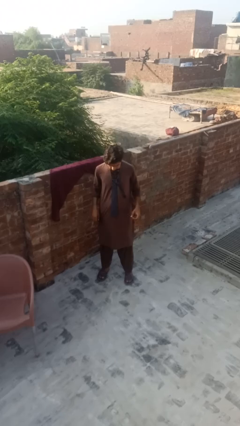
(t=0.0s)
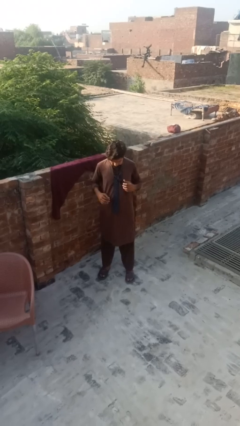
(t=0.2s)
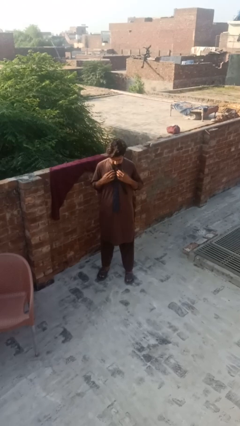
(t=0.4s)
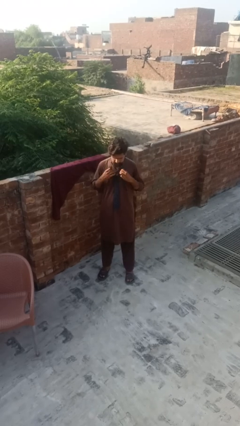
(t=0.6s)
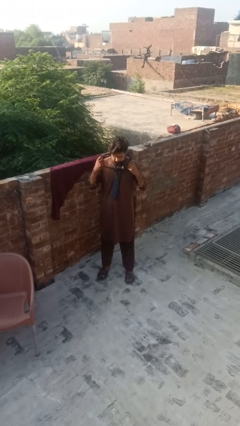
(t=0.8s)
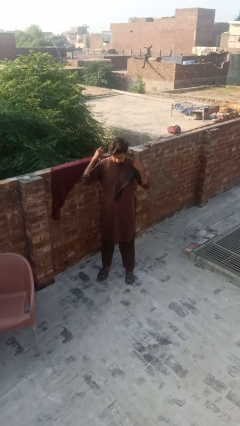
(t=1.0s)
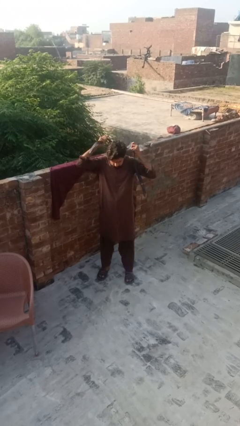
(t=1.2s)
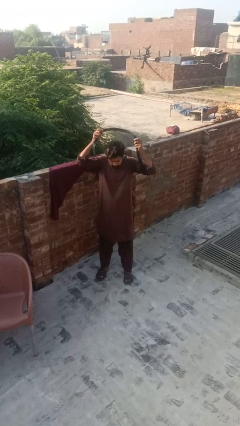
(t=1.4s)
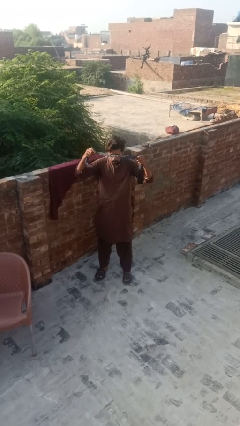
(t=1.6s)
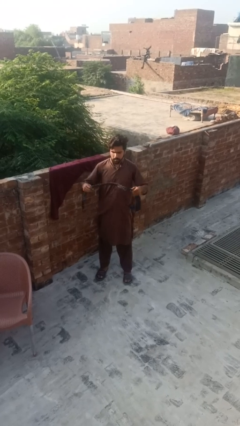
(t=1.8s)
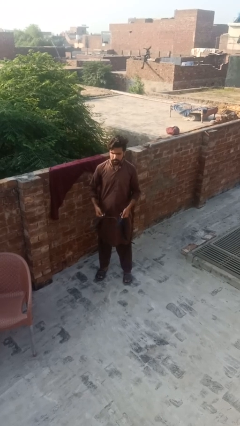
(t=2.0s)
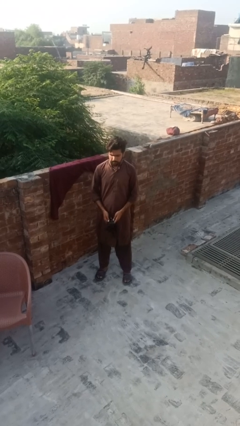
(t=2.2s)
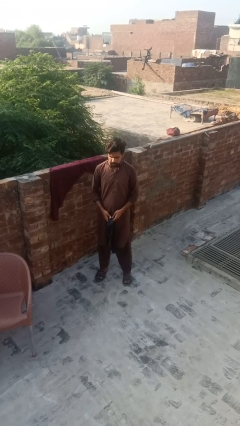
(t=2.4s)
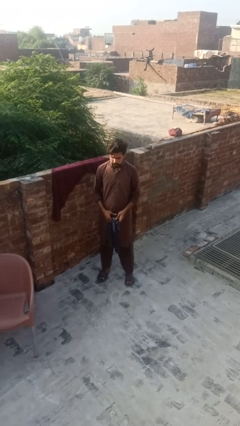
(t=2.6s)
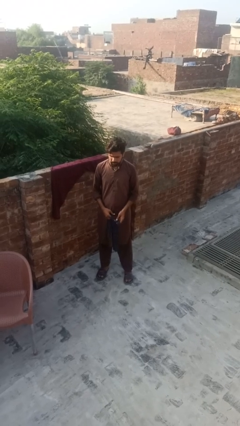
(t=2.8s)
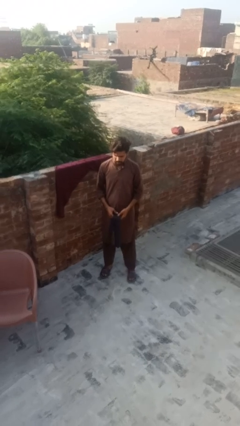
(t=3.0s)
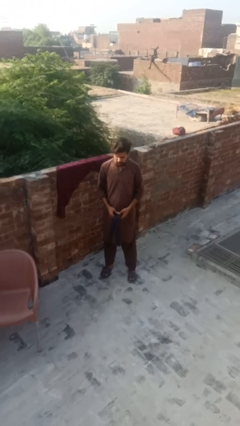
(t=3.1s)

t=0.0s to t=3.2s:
person takes off necktie

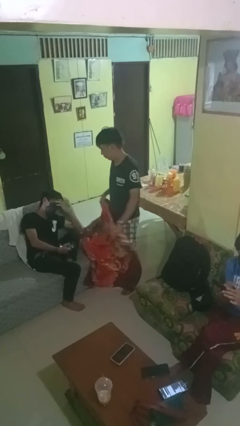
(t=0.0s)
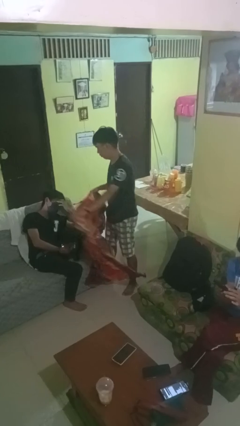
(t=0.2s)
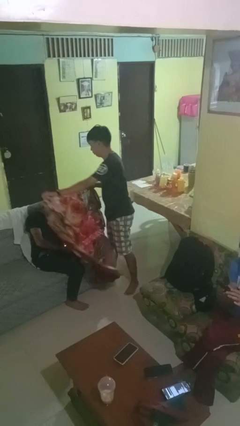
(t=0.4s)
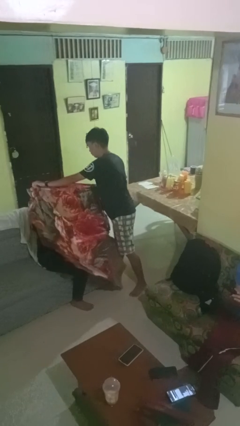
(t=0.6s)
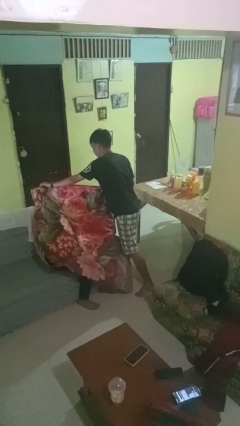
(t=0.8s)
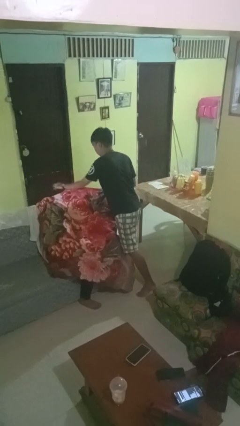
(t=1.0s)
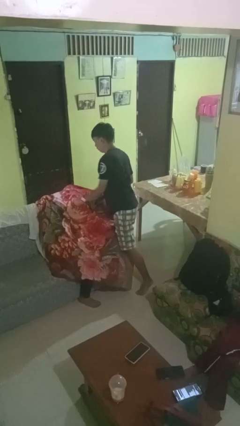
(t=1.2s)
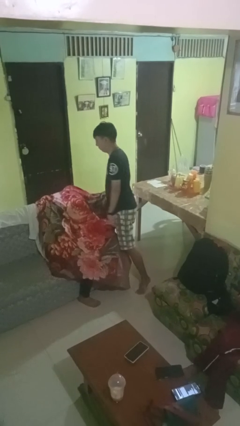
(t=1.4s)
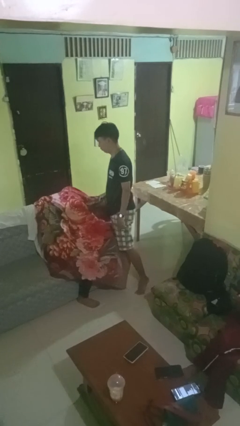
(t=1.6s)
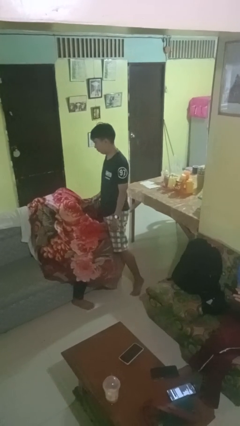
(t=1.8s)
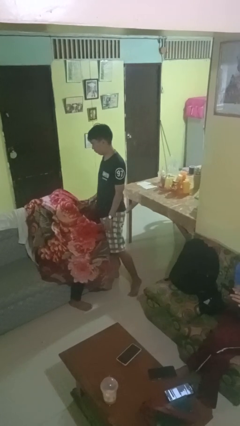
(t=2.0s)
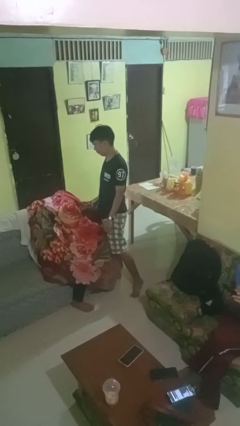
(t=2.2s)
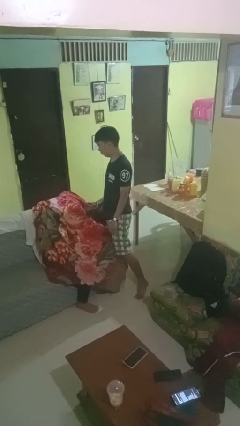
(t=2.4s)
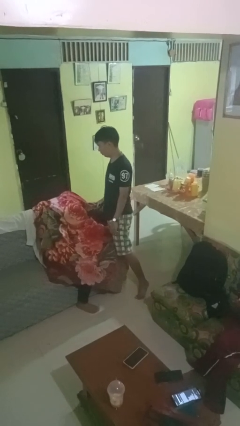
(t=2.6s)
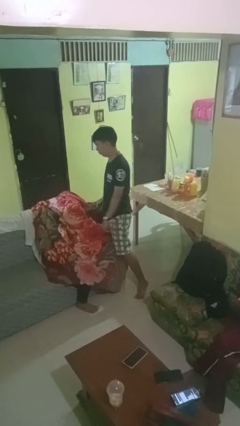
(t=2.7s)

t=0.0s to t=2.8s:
person covers friend with blanket

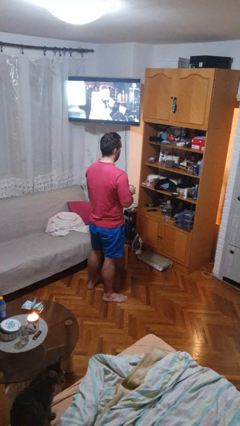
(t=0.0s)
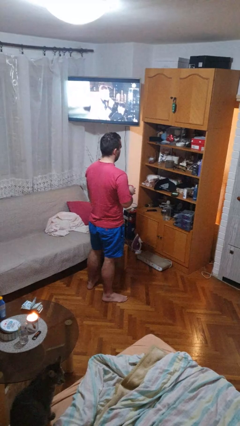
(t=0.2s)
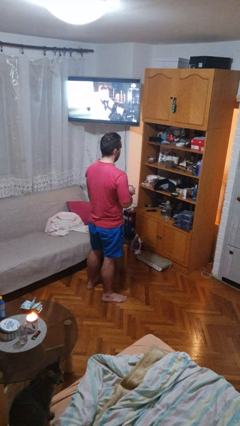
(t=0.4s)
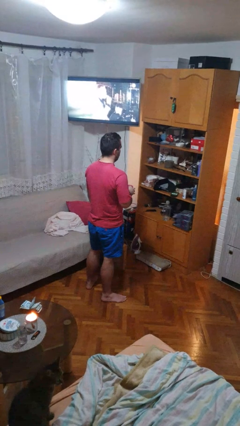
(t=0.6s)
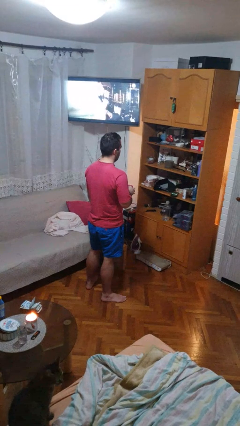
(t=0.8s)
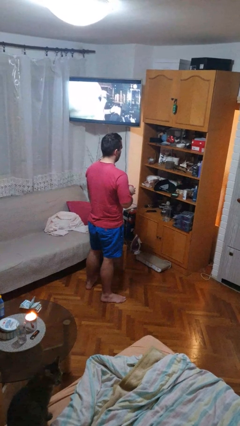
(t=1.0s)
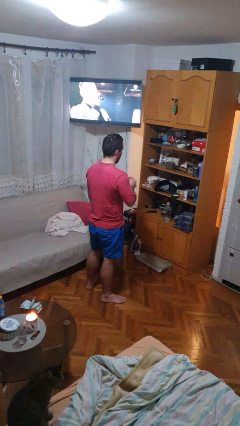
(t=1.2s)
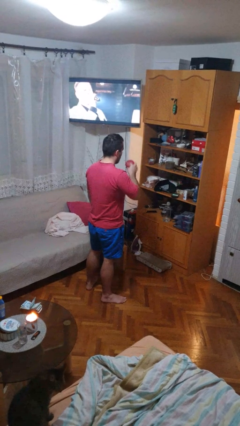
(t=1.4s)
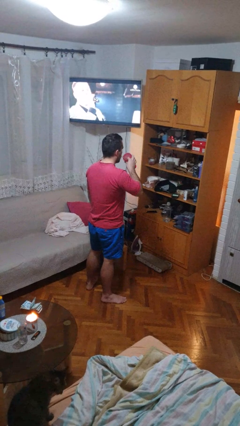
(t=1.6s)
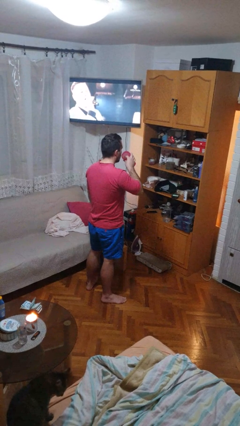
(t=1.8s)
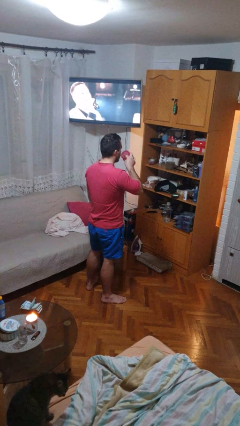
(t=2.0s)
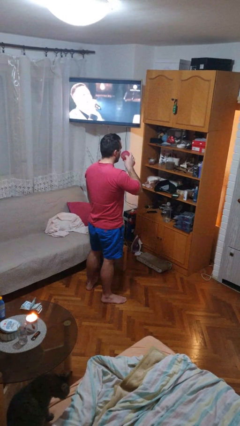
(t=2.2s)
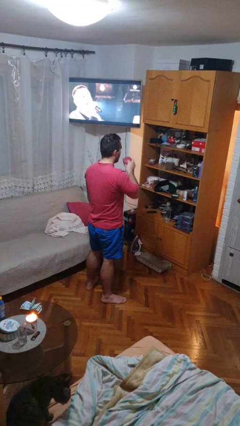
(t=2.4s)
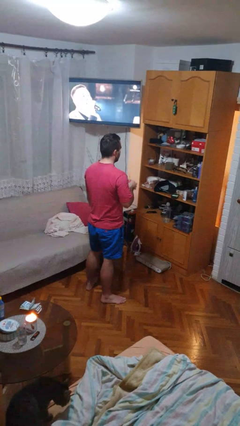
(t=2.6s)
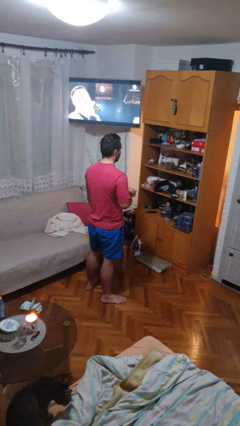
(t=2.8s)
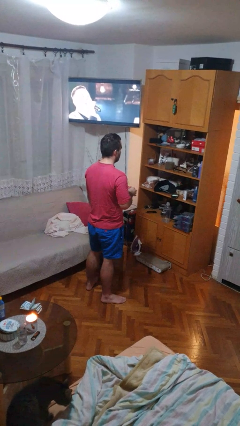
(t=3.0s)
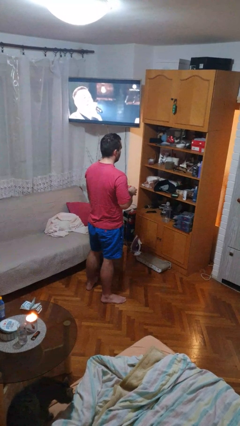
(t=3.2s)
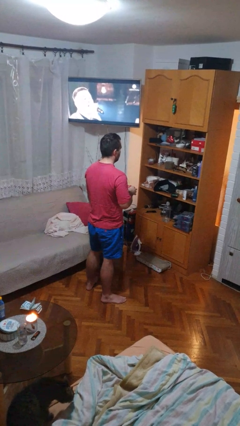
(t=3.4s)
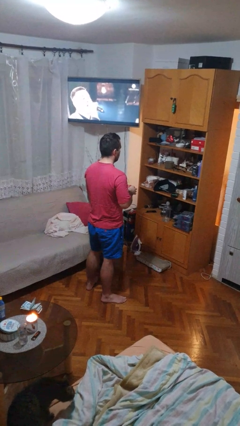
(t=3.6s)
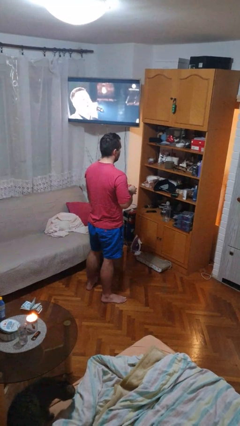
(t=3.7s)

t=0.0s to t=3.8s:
person drinks from straw

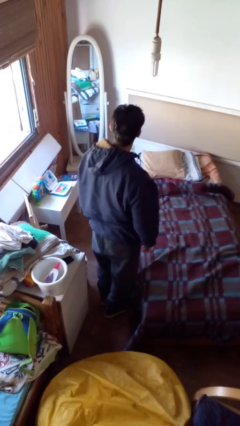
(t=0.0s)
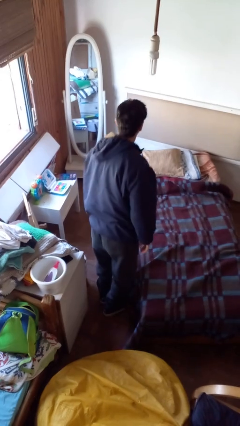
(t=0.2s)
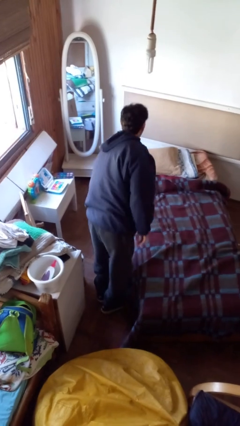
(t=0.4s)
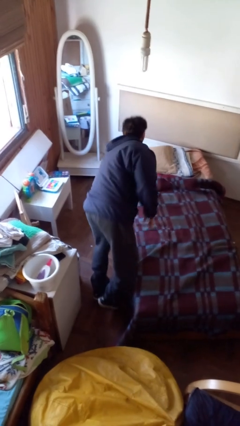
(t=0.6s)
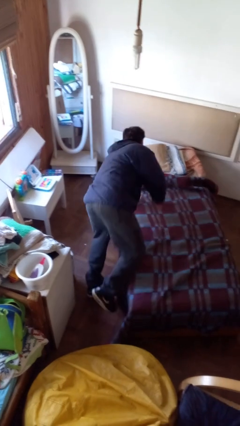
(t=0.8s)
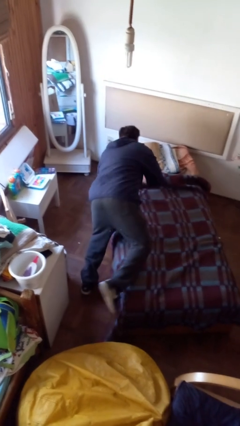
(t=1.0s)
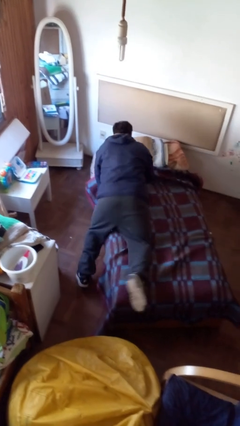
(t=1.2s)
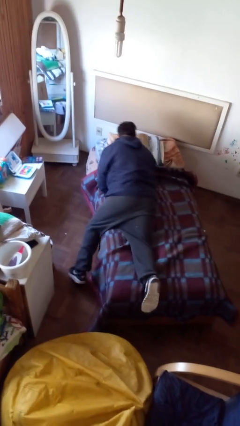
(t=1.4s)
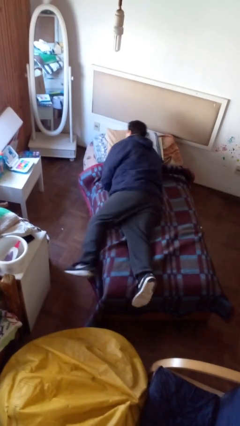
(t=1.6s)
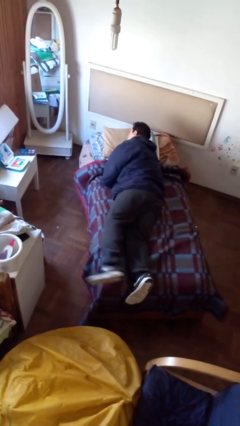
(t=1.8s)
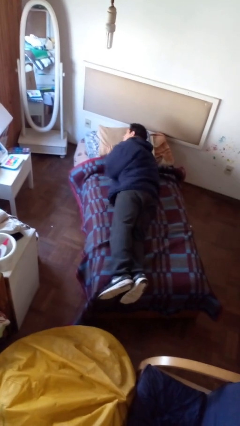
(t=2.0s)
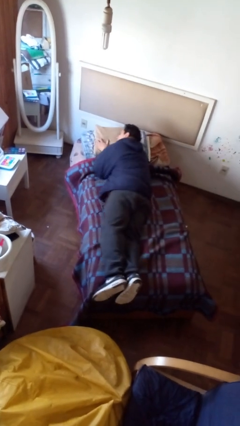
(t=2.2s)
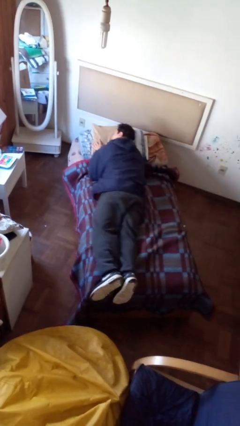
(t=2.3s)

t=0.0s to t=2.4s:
person lies down on bed

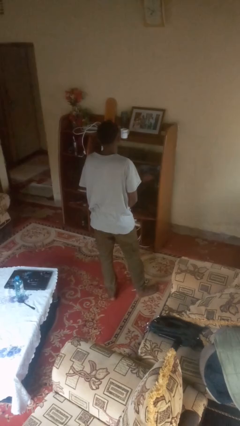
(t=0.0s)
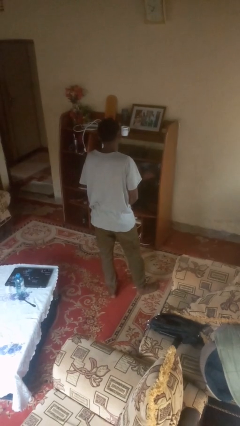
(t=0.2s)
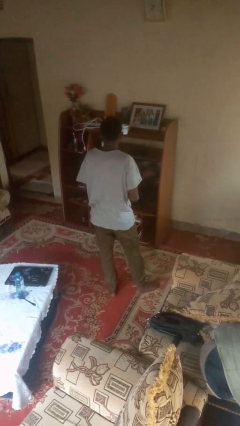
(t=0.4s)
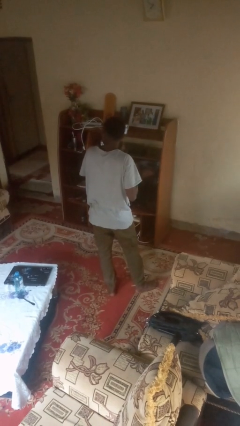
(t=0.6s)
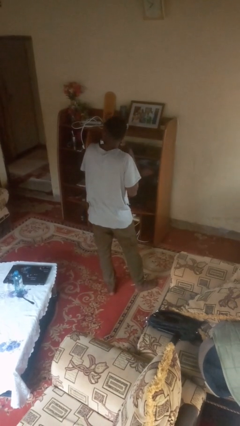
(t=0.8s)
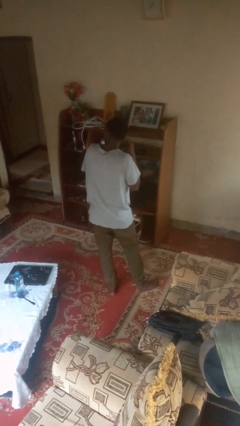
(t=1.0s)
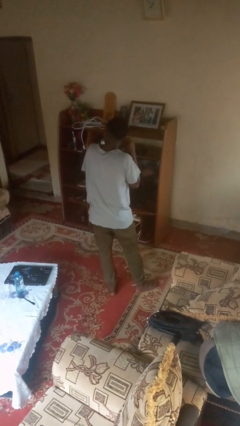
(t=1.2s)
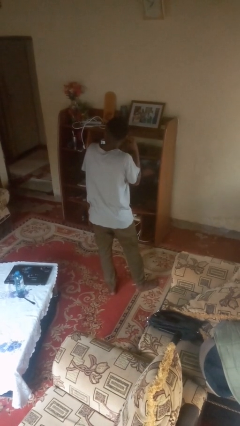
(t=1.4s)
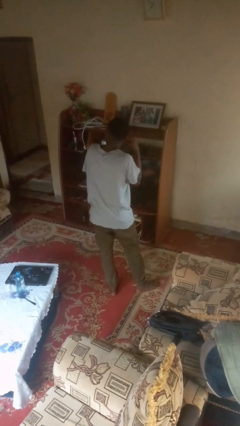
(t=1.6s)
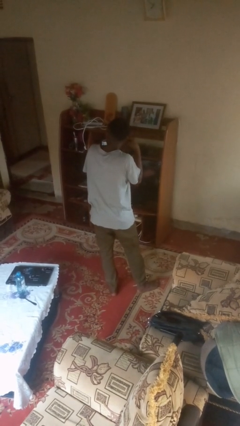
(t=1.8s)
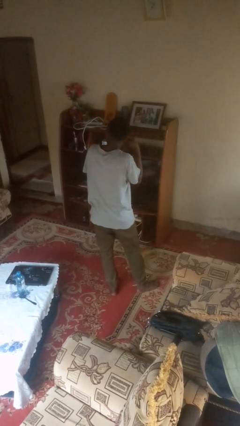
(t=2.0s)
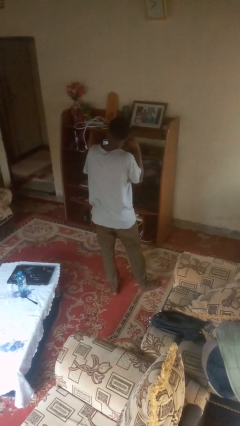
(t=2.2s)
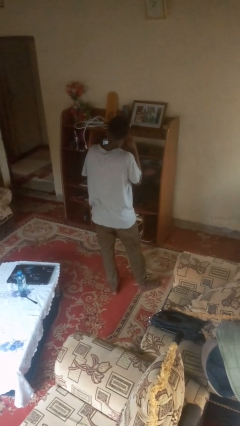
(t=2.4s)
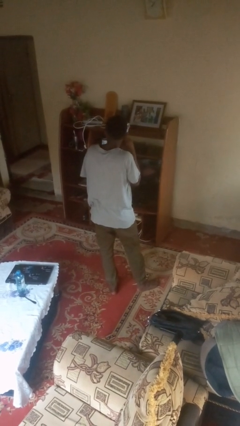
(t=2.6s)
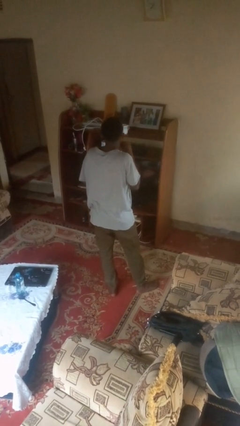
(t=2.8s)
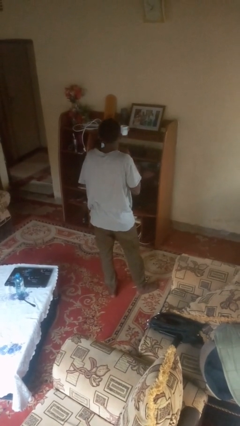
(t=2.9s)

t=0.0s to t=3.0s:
person takes off earrings

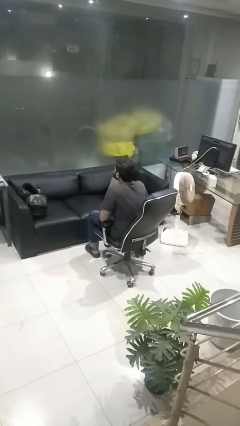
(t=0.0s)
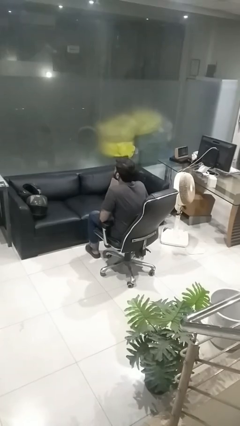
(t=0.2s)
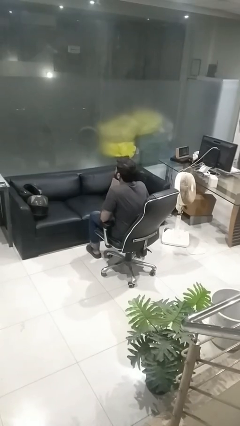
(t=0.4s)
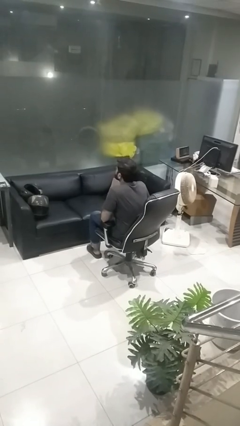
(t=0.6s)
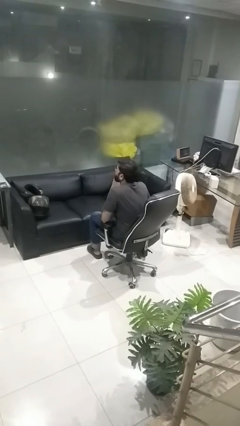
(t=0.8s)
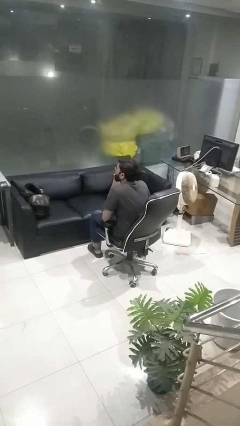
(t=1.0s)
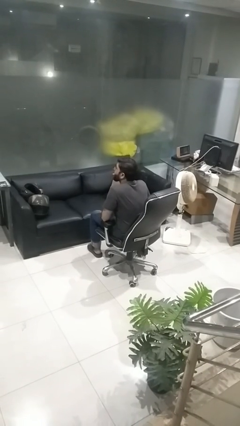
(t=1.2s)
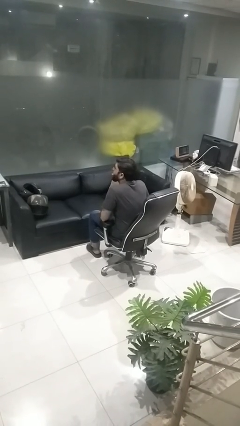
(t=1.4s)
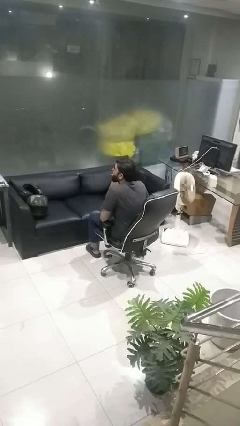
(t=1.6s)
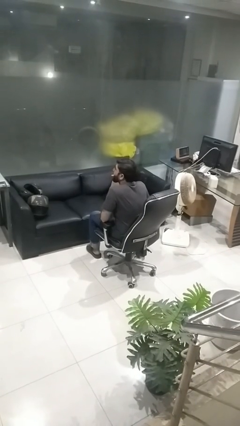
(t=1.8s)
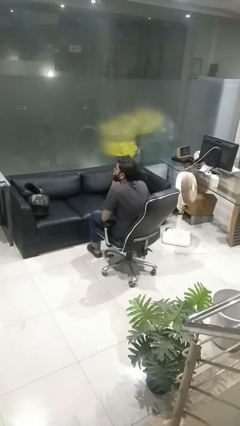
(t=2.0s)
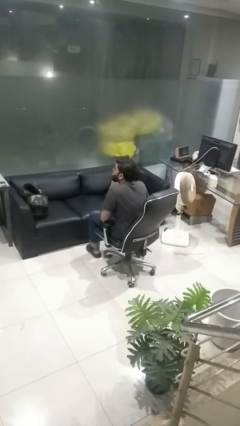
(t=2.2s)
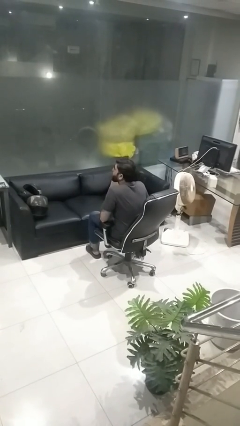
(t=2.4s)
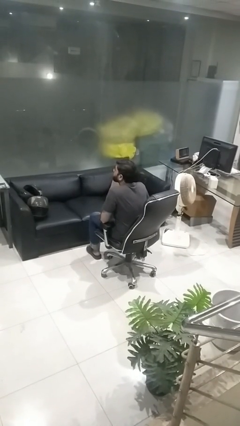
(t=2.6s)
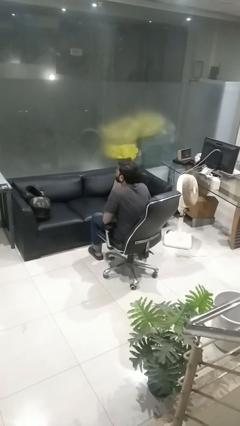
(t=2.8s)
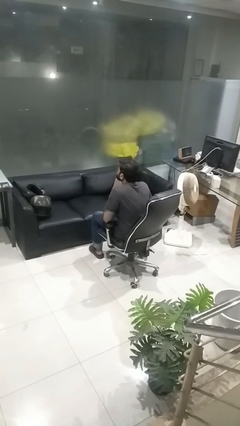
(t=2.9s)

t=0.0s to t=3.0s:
person sticks out tongue
